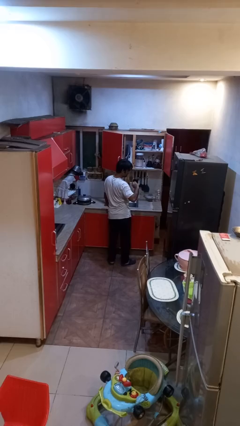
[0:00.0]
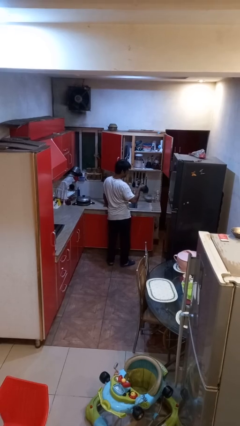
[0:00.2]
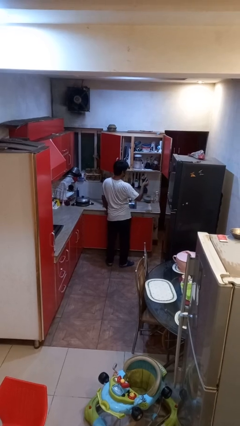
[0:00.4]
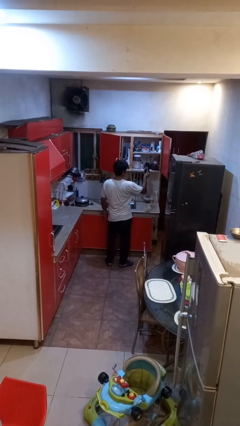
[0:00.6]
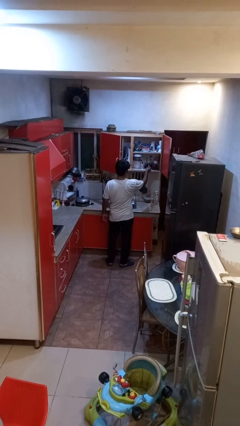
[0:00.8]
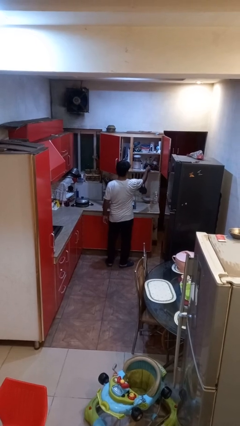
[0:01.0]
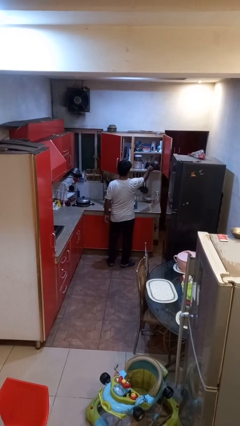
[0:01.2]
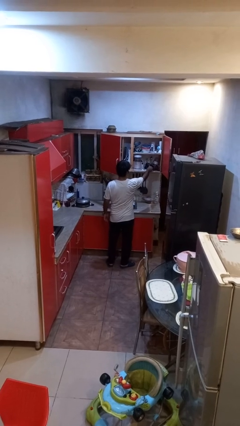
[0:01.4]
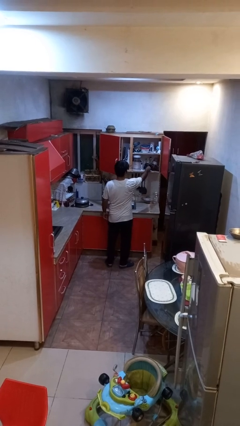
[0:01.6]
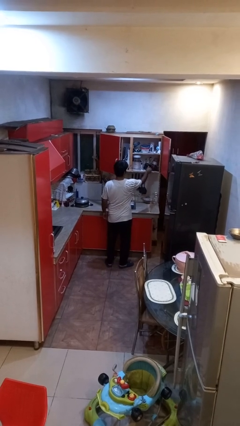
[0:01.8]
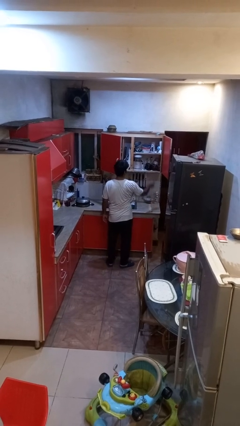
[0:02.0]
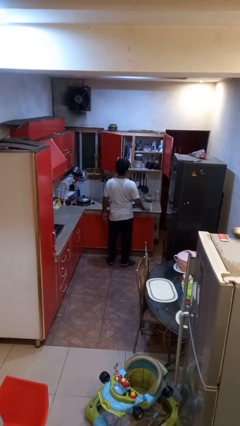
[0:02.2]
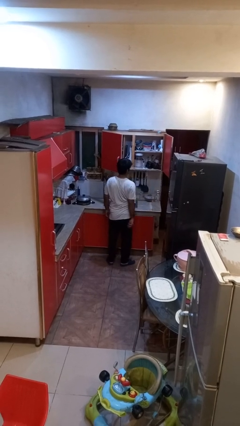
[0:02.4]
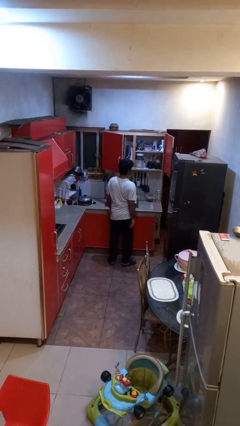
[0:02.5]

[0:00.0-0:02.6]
person puts down object into cabinet

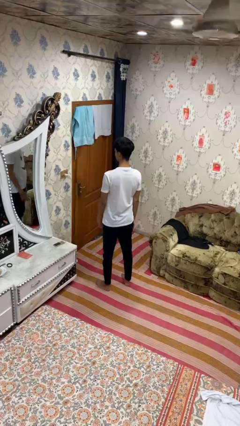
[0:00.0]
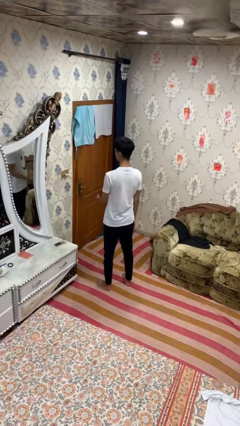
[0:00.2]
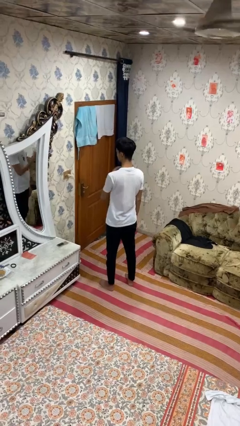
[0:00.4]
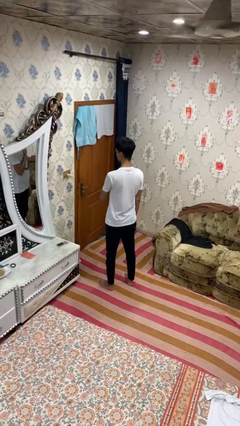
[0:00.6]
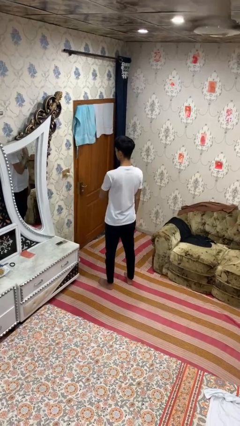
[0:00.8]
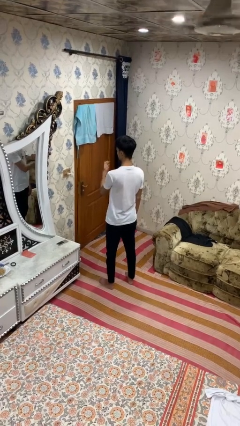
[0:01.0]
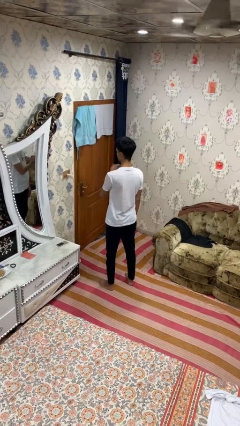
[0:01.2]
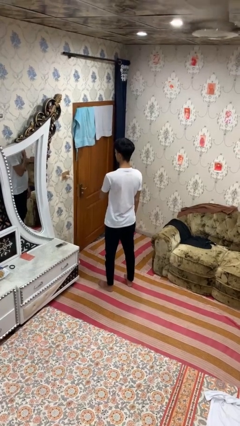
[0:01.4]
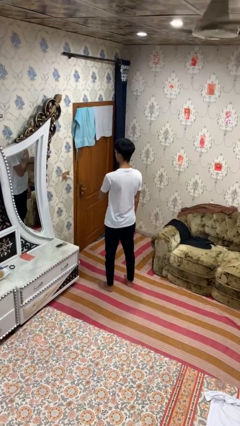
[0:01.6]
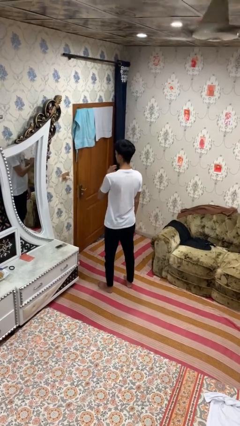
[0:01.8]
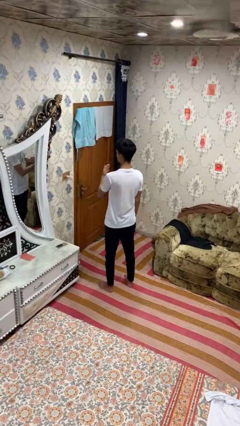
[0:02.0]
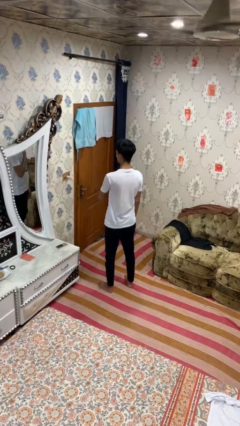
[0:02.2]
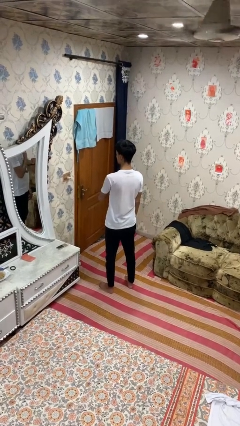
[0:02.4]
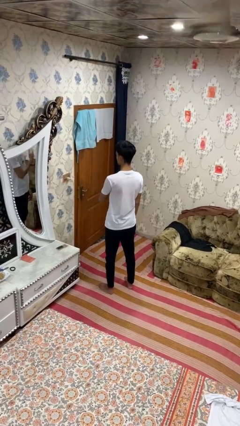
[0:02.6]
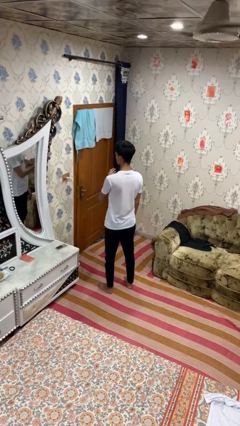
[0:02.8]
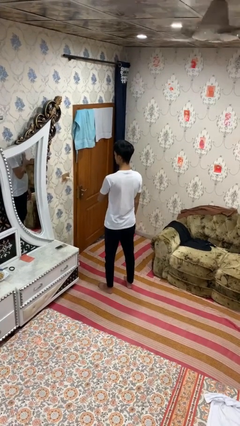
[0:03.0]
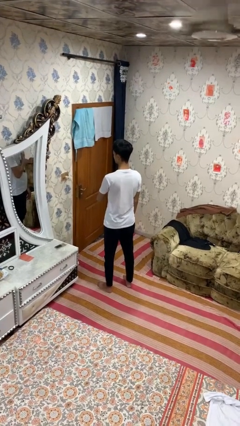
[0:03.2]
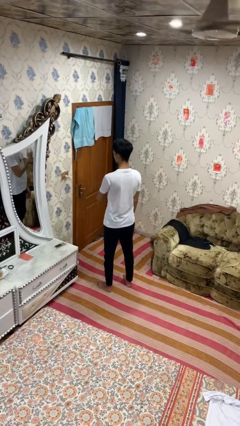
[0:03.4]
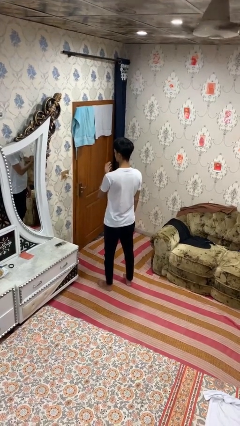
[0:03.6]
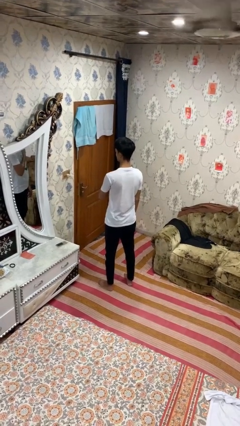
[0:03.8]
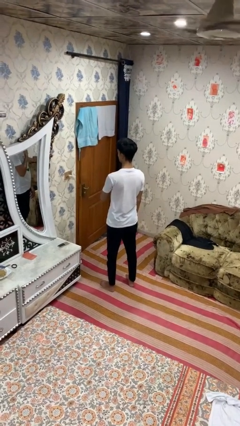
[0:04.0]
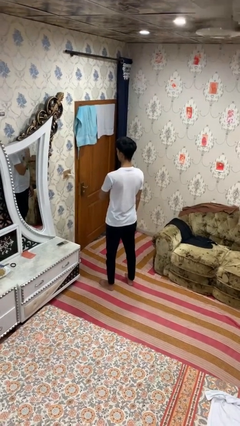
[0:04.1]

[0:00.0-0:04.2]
person drums on chest

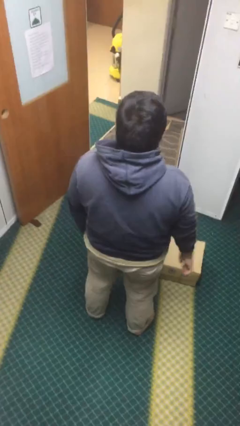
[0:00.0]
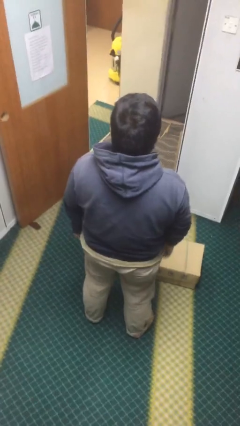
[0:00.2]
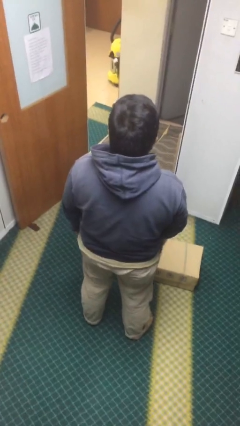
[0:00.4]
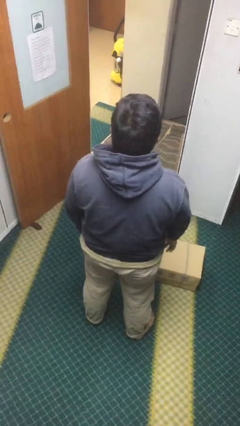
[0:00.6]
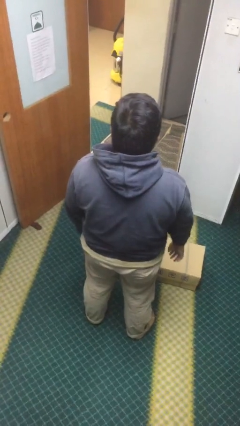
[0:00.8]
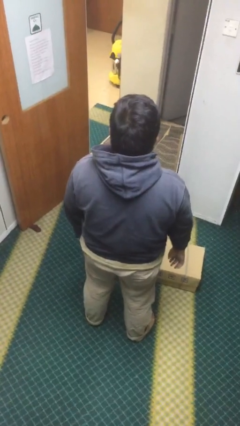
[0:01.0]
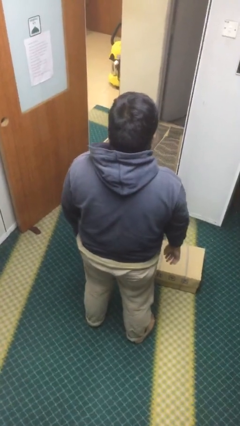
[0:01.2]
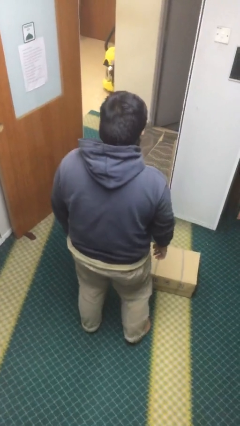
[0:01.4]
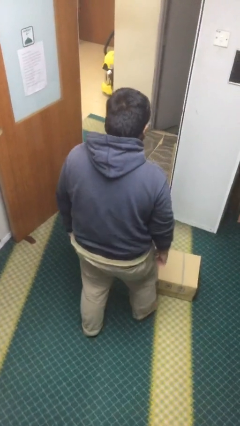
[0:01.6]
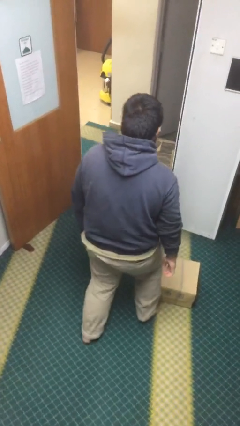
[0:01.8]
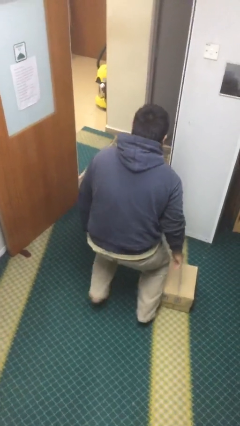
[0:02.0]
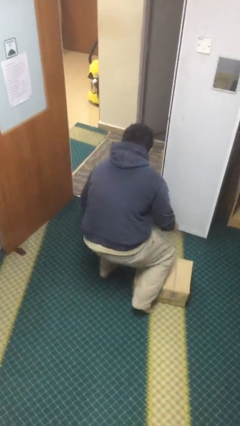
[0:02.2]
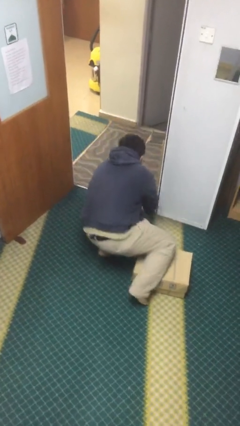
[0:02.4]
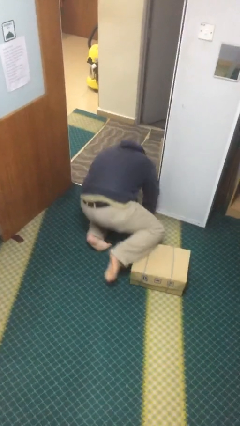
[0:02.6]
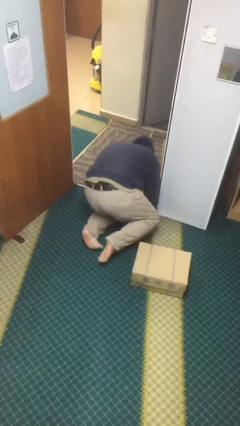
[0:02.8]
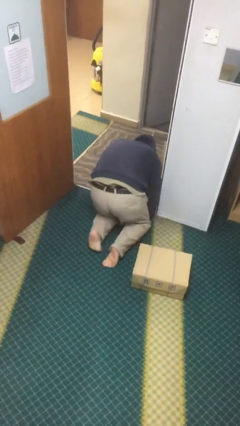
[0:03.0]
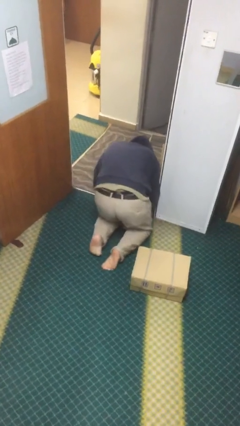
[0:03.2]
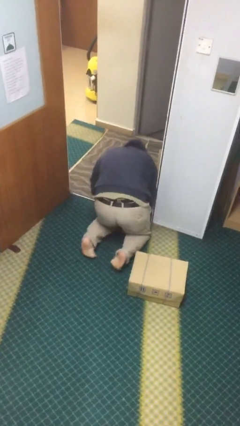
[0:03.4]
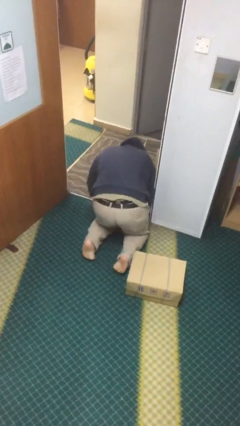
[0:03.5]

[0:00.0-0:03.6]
person trips on object on floor

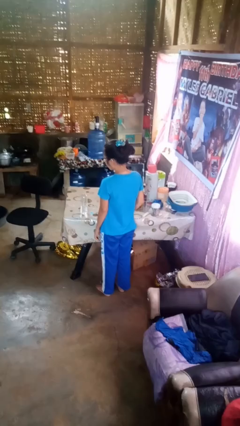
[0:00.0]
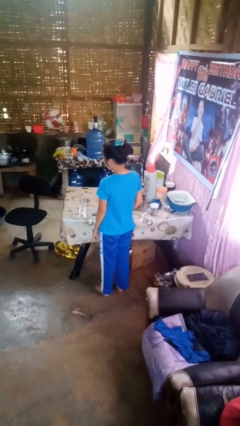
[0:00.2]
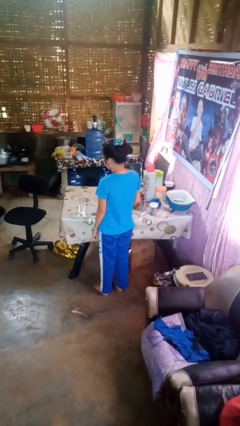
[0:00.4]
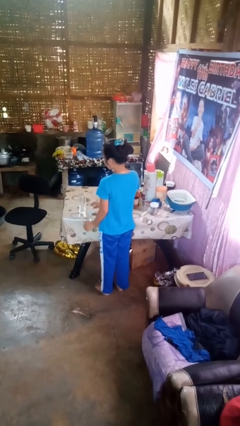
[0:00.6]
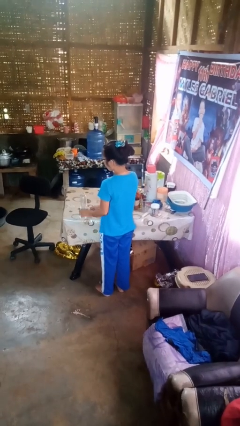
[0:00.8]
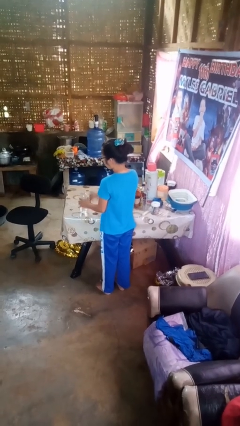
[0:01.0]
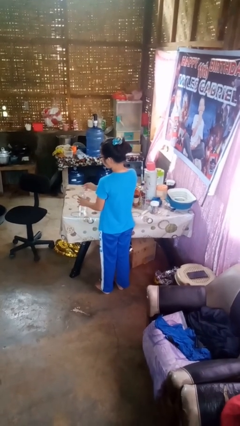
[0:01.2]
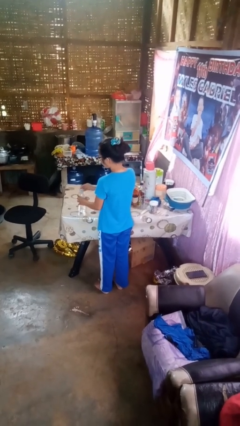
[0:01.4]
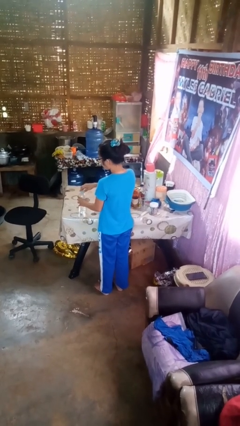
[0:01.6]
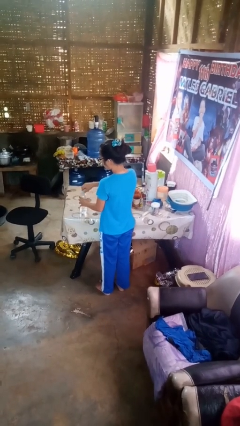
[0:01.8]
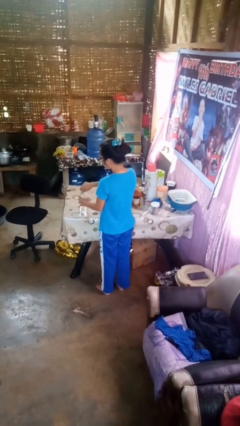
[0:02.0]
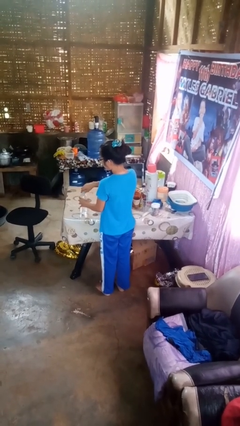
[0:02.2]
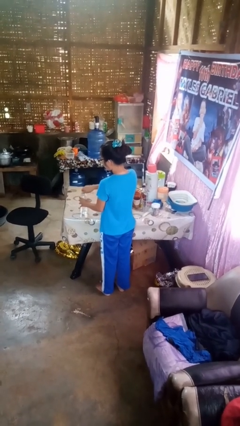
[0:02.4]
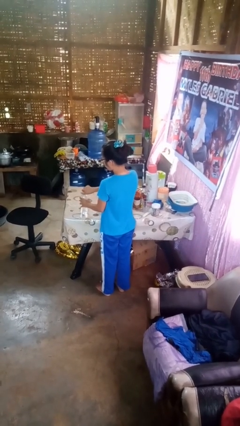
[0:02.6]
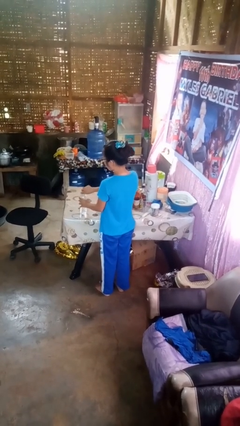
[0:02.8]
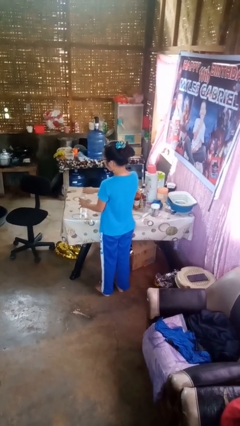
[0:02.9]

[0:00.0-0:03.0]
person screws lid to bottle

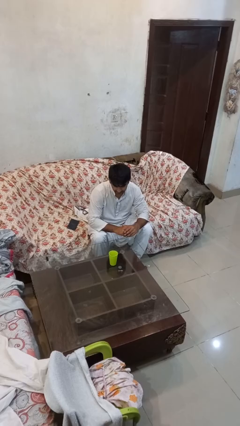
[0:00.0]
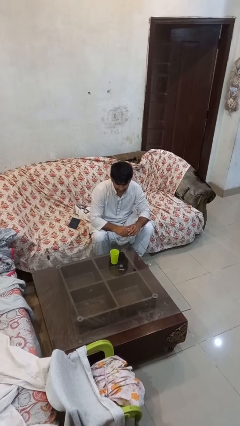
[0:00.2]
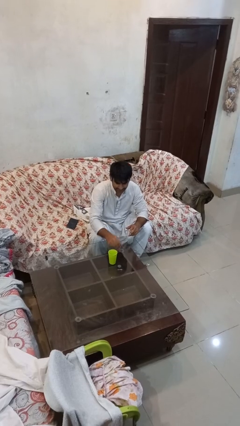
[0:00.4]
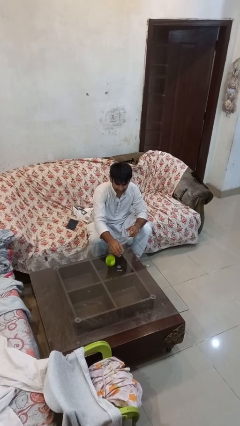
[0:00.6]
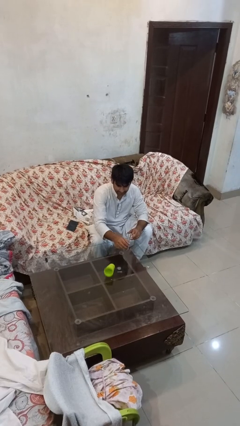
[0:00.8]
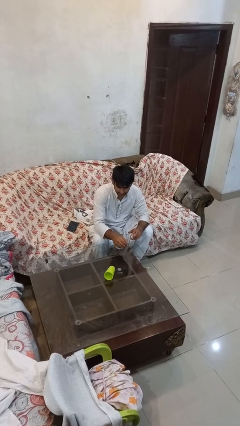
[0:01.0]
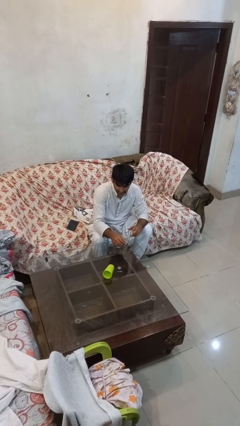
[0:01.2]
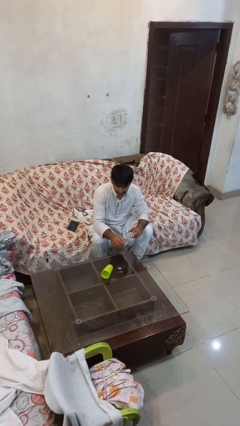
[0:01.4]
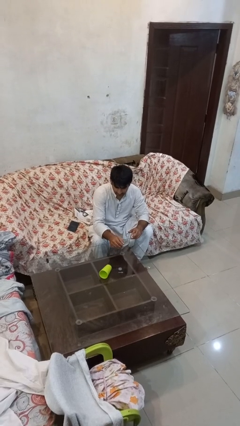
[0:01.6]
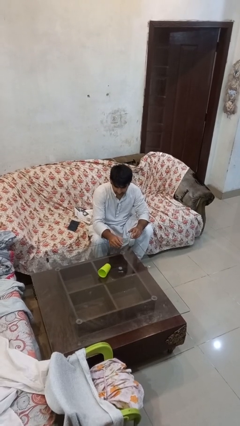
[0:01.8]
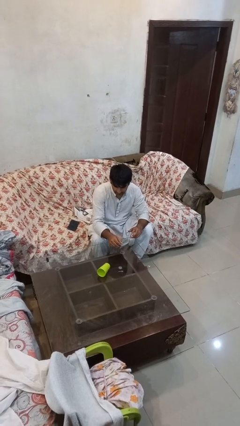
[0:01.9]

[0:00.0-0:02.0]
person knocks over glass

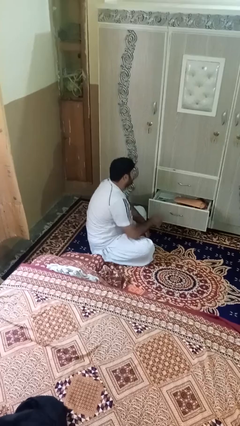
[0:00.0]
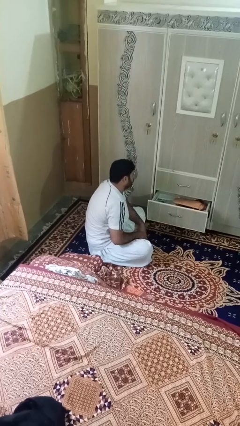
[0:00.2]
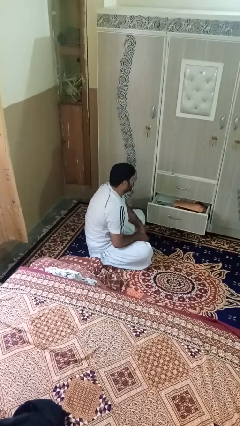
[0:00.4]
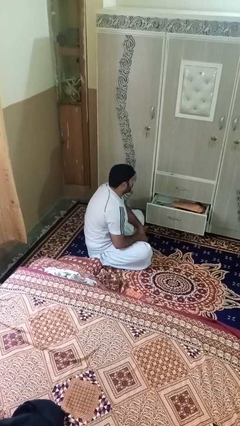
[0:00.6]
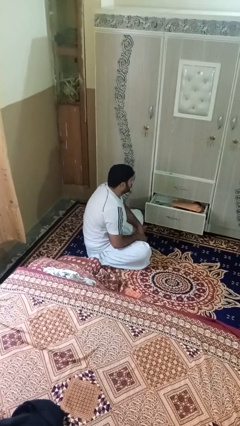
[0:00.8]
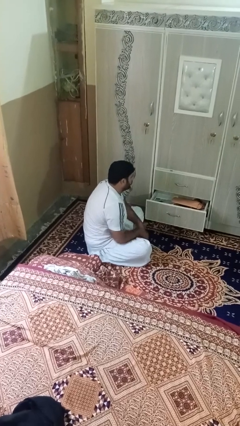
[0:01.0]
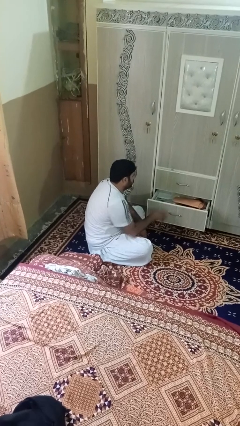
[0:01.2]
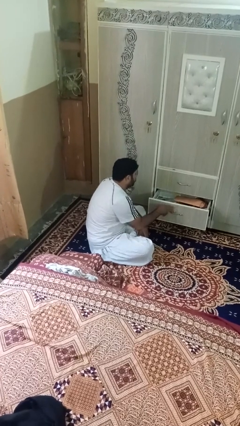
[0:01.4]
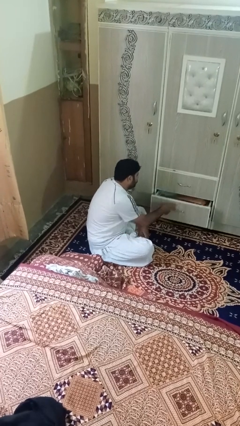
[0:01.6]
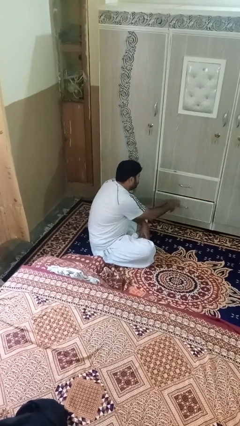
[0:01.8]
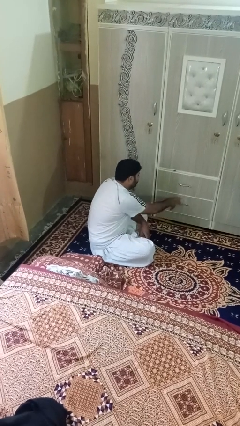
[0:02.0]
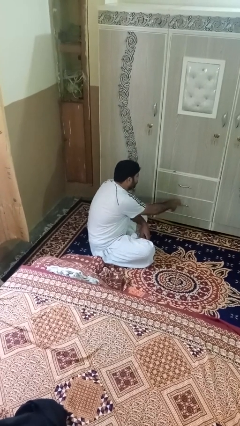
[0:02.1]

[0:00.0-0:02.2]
person closes dresser drawer
